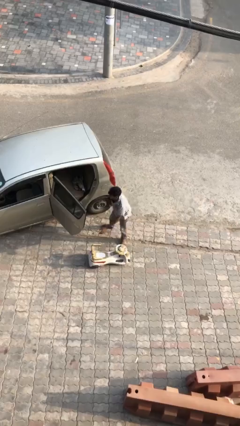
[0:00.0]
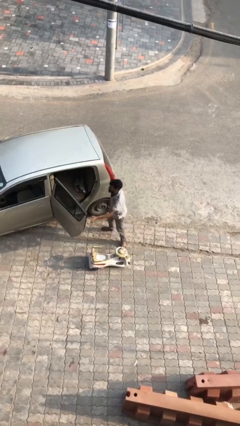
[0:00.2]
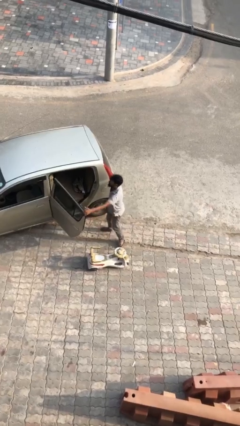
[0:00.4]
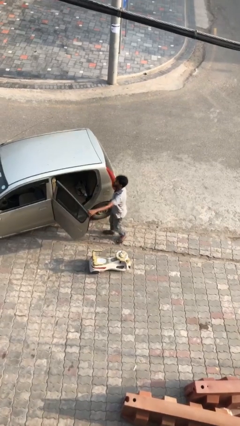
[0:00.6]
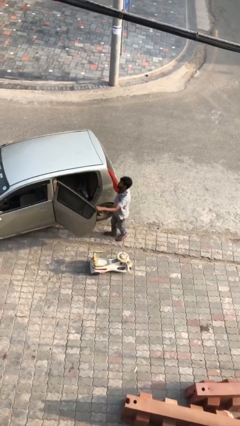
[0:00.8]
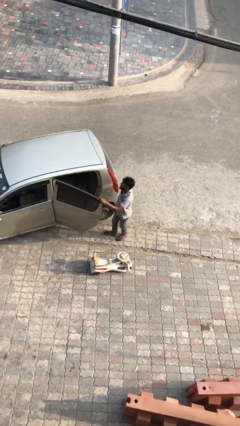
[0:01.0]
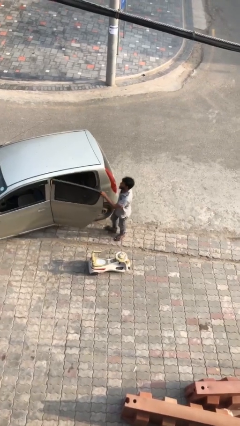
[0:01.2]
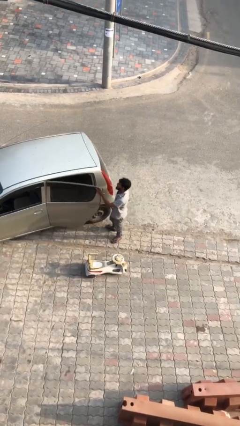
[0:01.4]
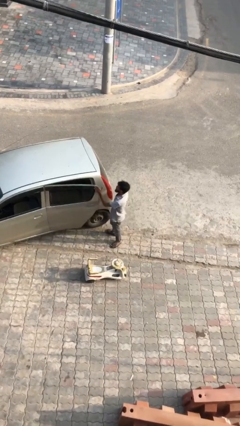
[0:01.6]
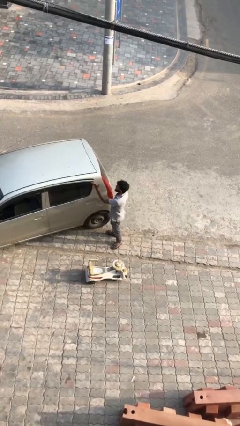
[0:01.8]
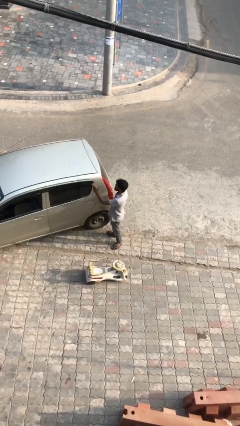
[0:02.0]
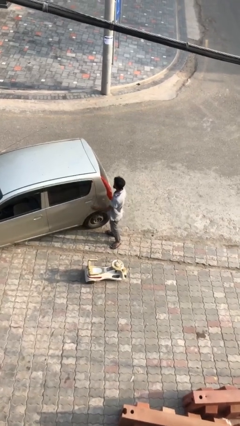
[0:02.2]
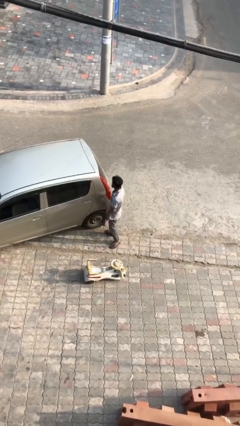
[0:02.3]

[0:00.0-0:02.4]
person closes car door

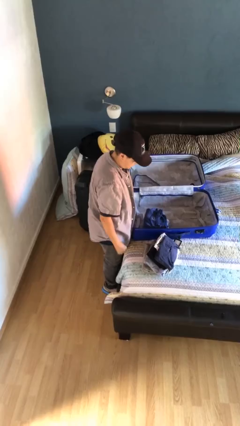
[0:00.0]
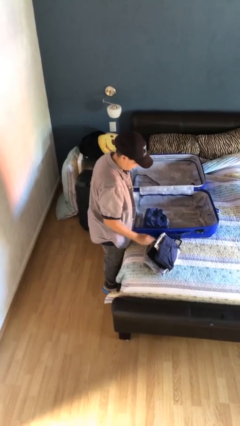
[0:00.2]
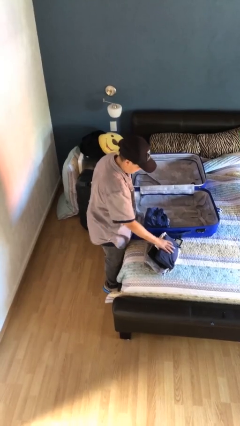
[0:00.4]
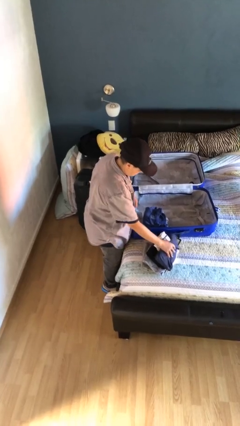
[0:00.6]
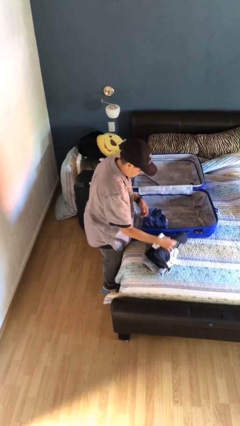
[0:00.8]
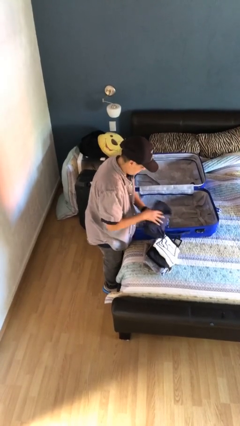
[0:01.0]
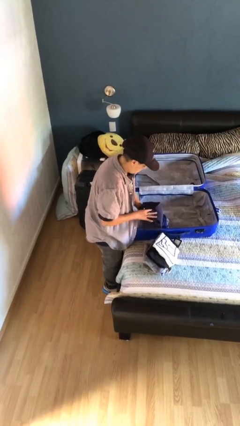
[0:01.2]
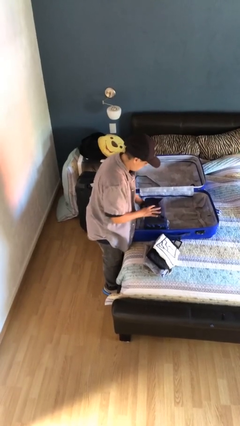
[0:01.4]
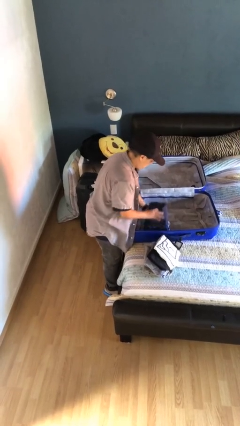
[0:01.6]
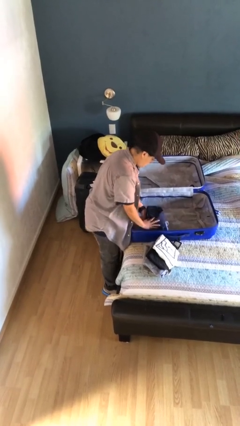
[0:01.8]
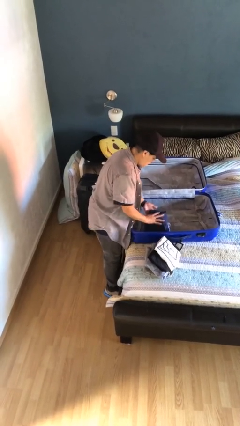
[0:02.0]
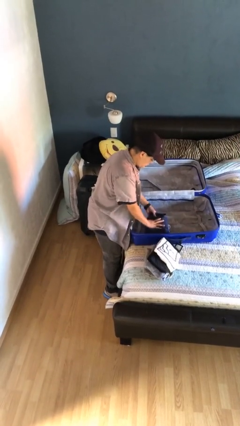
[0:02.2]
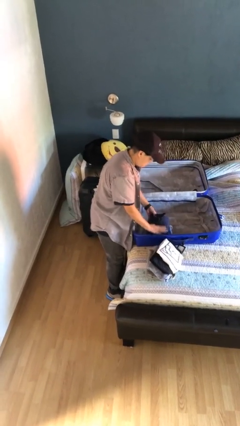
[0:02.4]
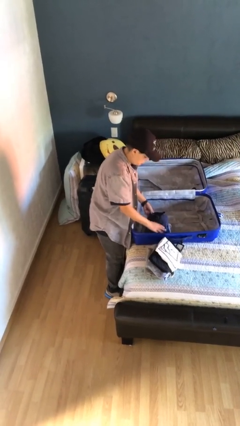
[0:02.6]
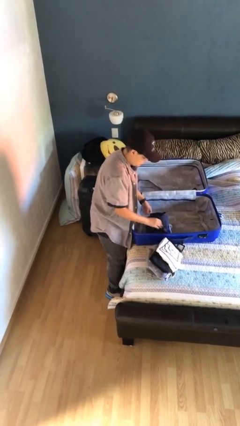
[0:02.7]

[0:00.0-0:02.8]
person loads clothes into suitcase

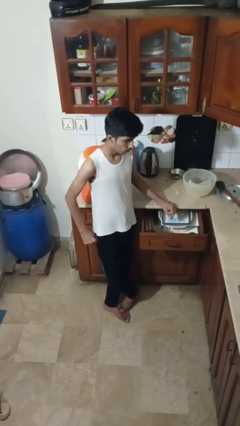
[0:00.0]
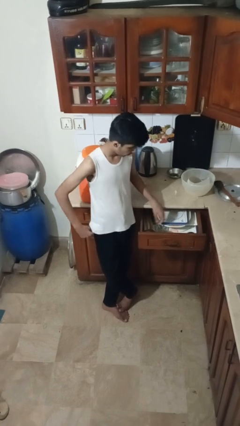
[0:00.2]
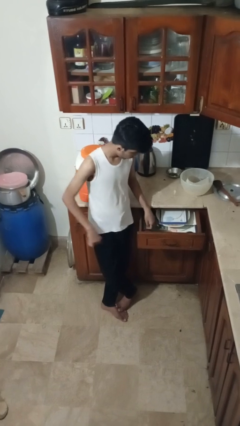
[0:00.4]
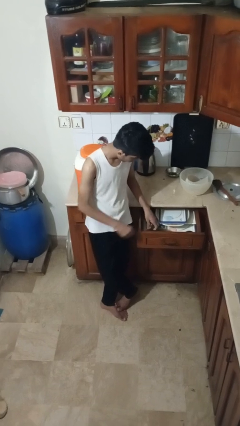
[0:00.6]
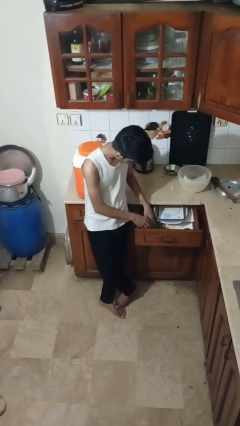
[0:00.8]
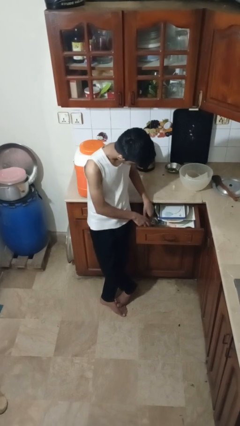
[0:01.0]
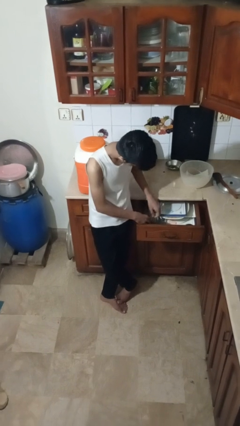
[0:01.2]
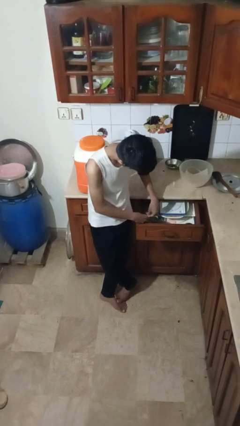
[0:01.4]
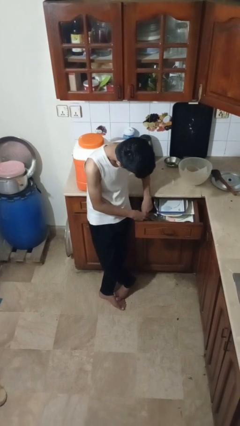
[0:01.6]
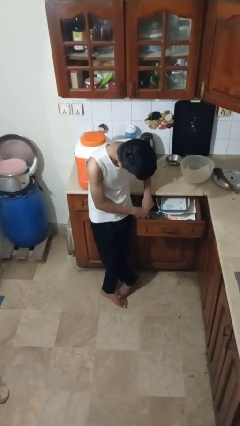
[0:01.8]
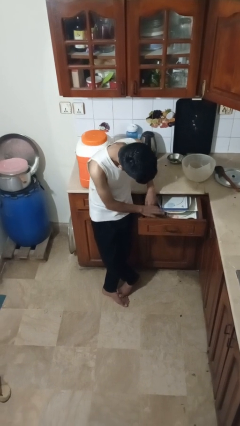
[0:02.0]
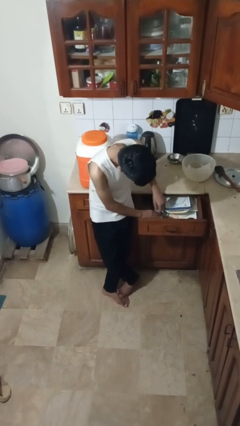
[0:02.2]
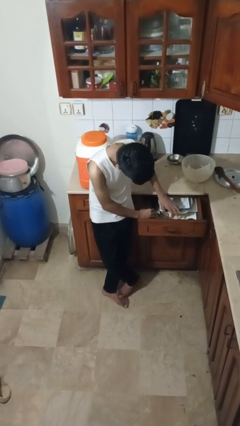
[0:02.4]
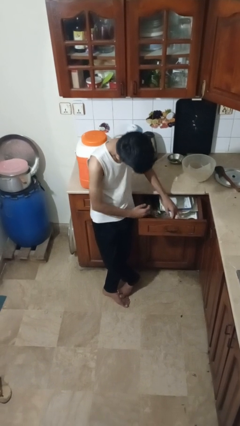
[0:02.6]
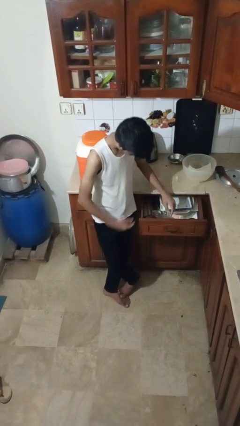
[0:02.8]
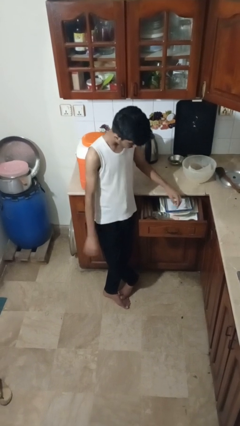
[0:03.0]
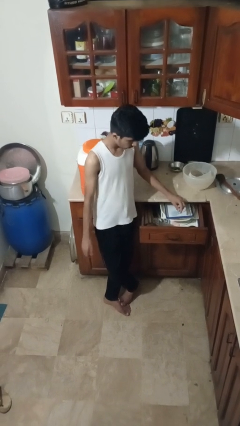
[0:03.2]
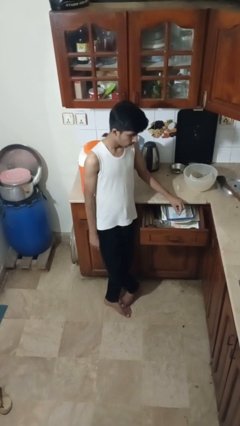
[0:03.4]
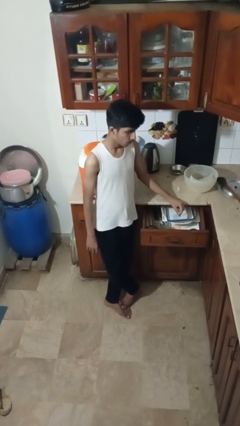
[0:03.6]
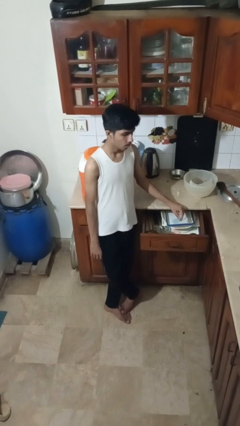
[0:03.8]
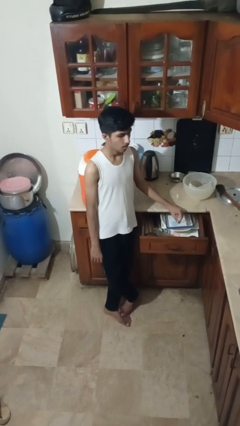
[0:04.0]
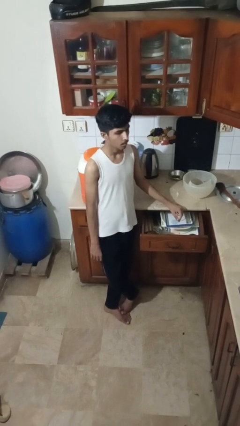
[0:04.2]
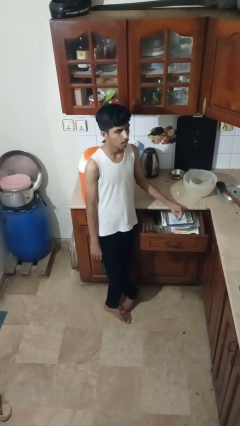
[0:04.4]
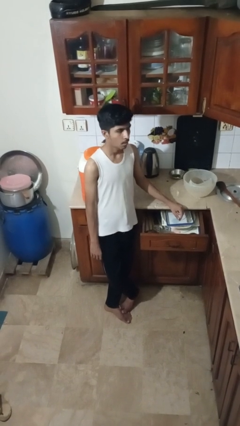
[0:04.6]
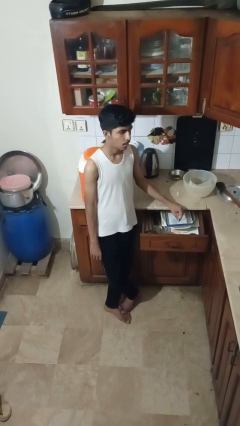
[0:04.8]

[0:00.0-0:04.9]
person searches in kitchen drawer

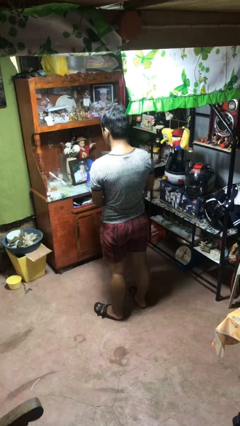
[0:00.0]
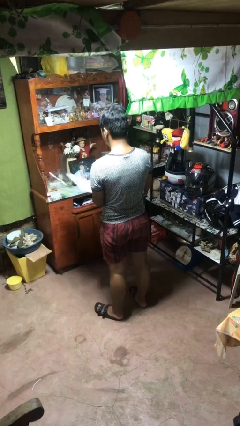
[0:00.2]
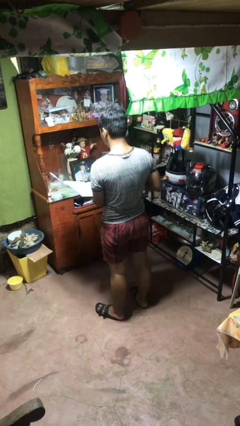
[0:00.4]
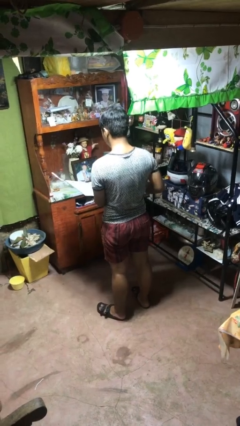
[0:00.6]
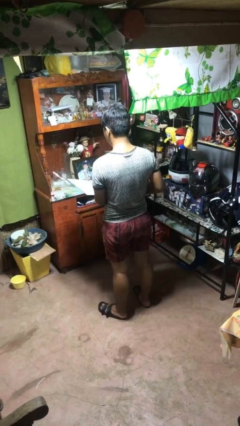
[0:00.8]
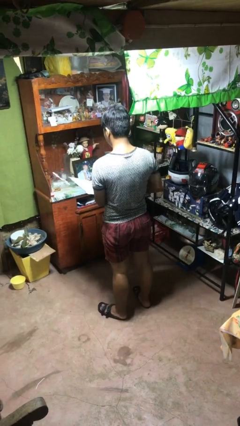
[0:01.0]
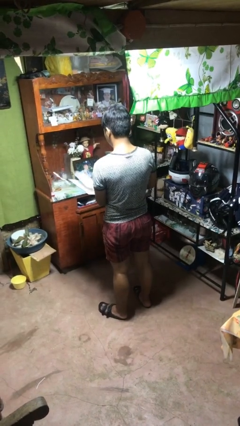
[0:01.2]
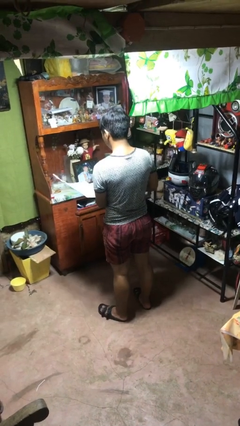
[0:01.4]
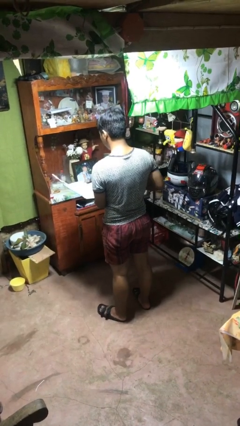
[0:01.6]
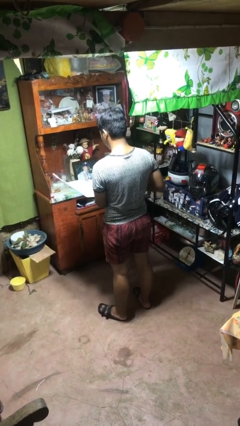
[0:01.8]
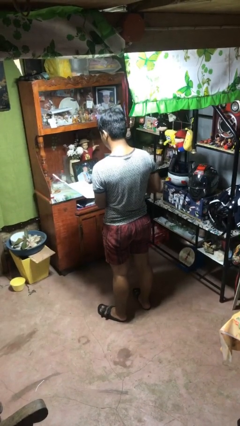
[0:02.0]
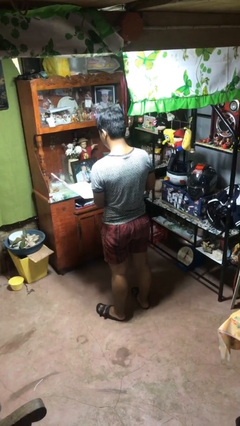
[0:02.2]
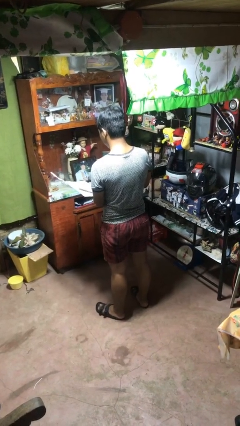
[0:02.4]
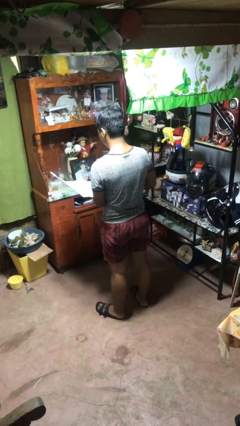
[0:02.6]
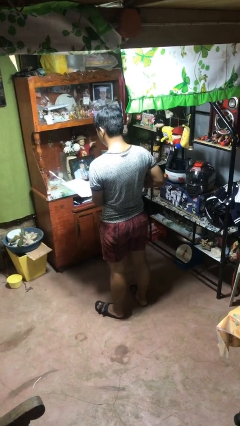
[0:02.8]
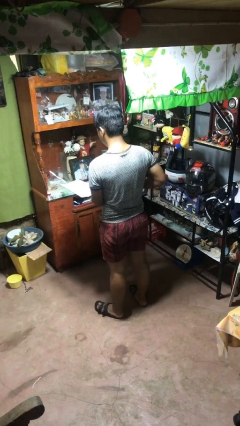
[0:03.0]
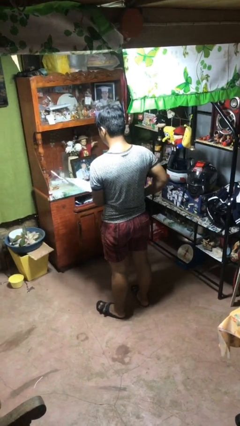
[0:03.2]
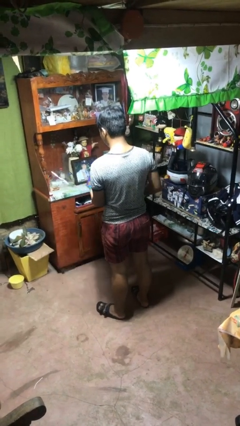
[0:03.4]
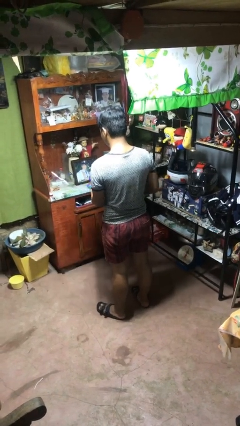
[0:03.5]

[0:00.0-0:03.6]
person reads magazine

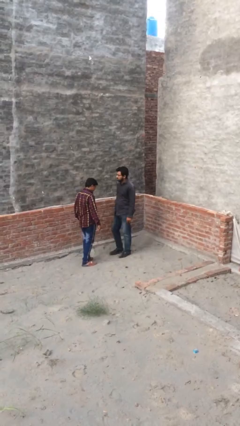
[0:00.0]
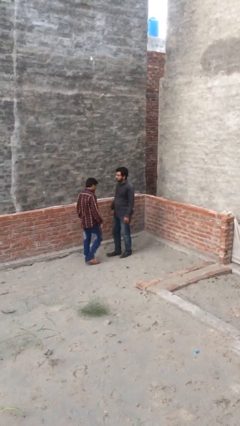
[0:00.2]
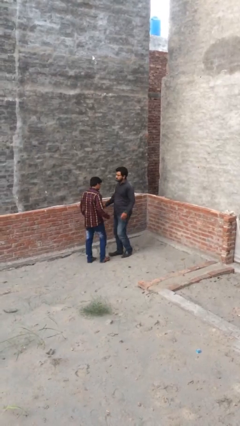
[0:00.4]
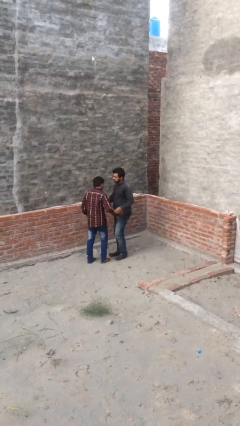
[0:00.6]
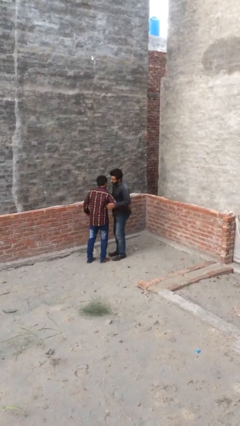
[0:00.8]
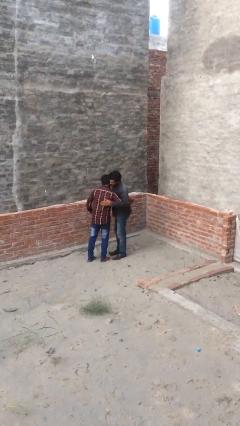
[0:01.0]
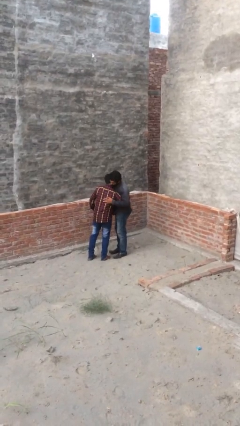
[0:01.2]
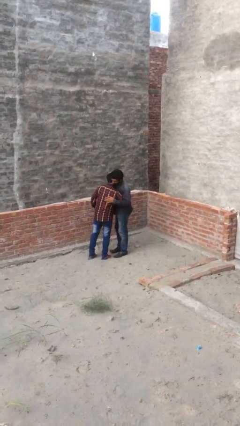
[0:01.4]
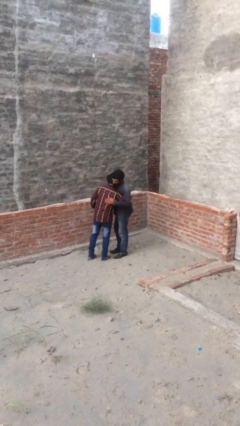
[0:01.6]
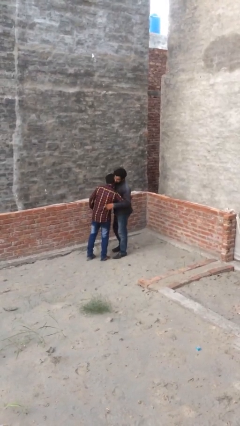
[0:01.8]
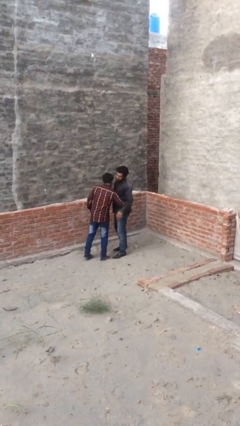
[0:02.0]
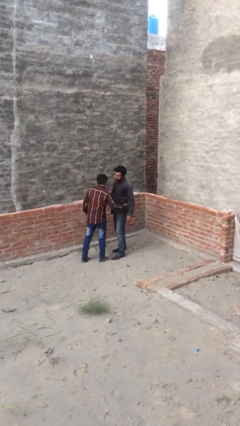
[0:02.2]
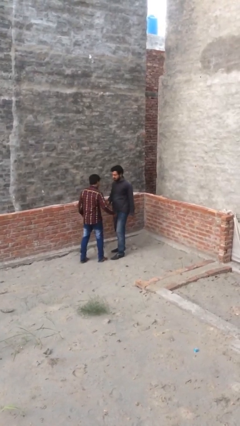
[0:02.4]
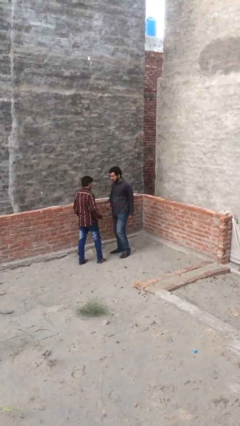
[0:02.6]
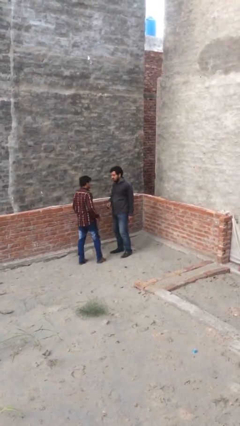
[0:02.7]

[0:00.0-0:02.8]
person embraces person

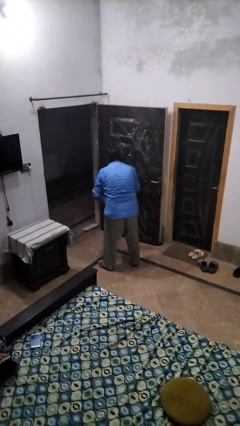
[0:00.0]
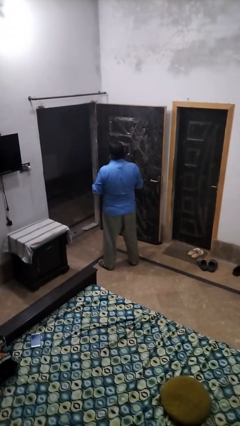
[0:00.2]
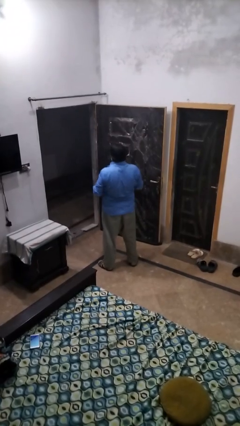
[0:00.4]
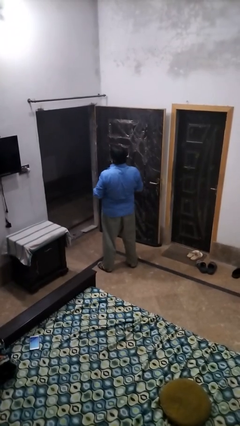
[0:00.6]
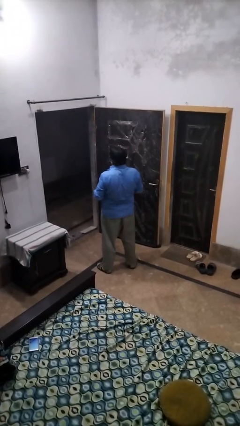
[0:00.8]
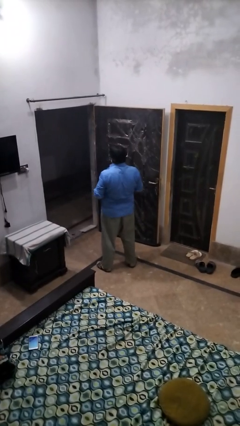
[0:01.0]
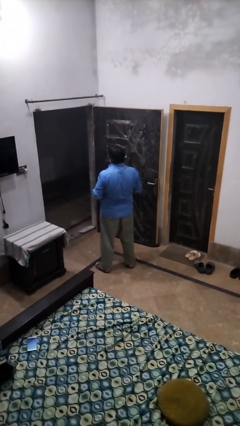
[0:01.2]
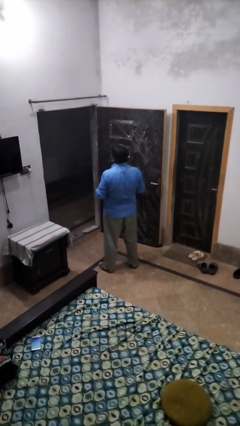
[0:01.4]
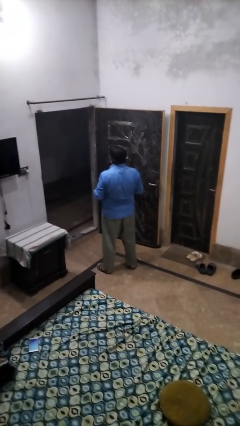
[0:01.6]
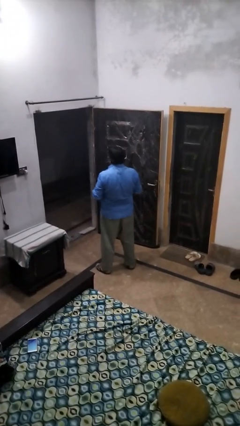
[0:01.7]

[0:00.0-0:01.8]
person picks up object from floor
